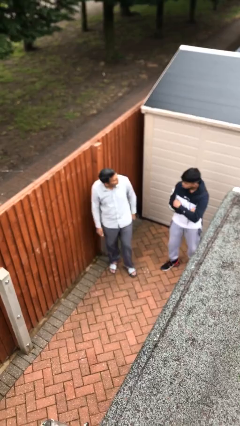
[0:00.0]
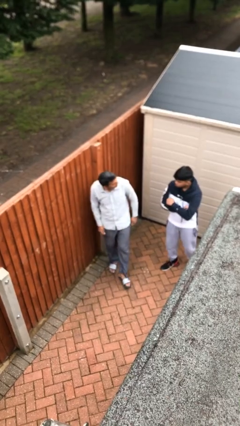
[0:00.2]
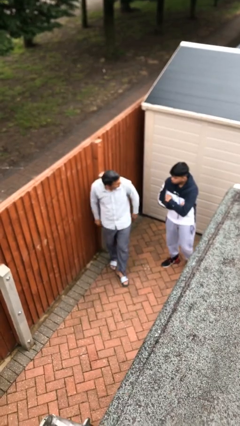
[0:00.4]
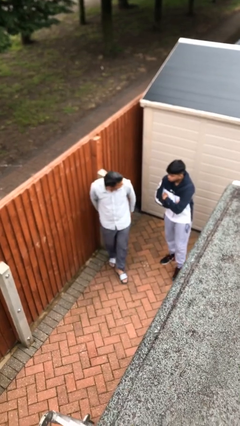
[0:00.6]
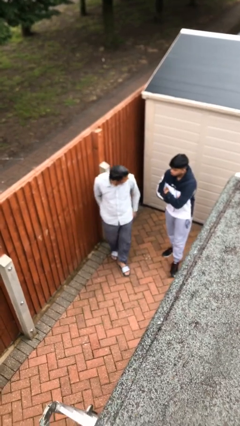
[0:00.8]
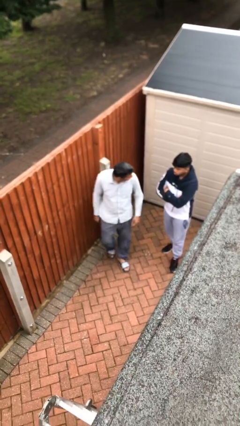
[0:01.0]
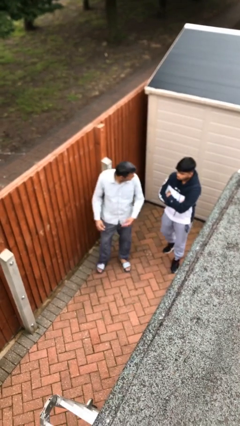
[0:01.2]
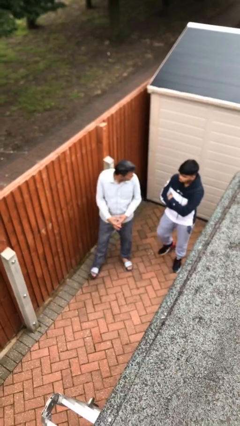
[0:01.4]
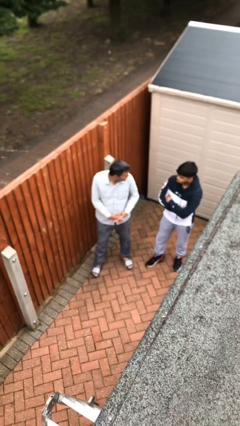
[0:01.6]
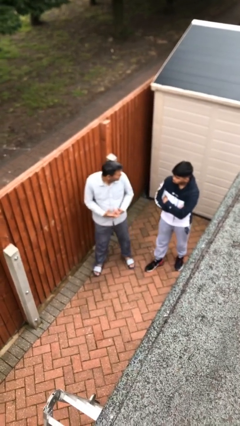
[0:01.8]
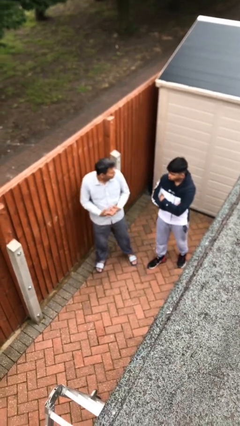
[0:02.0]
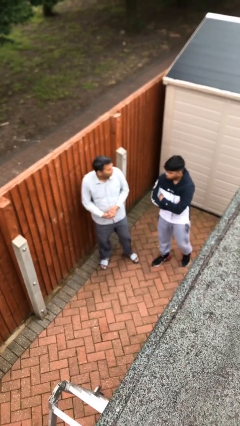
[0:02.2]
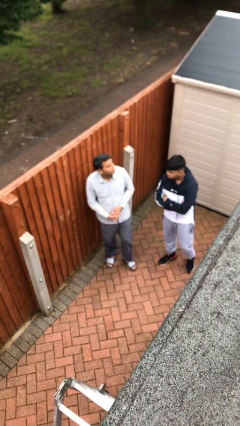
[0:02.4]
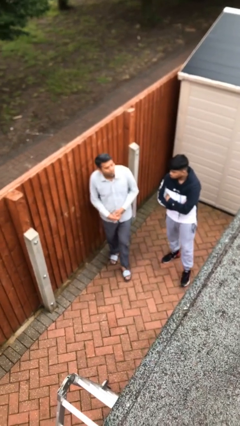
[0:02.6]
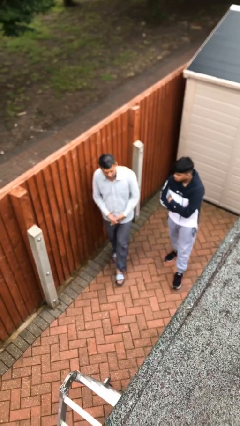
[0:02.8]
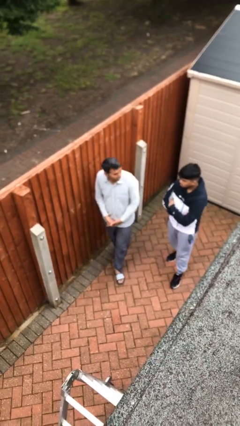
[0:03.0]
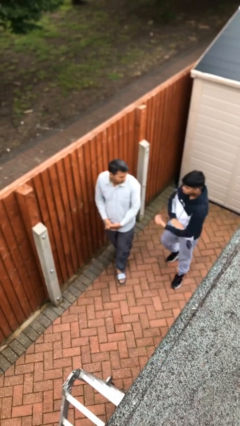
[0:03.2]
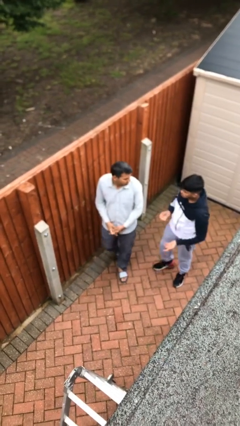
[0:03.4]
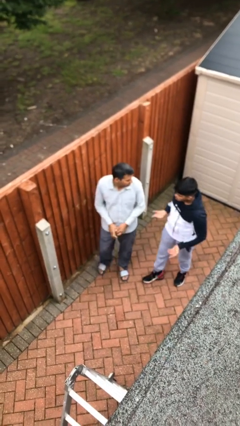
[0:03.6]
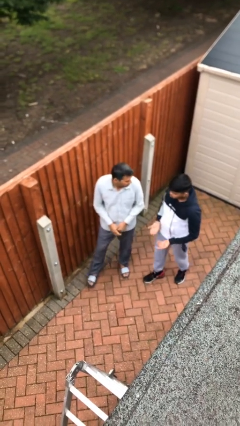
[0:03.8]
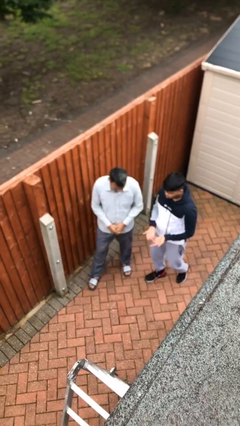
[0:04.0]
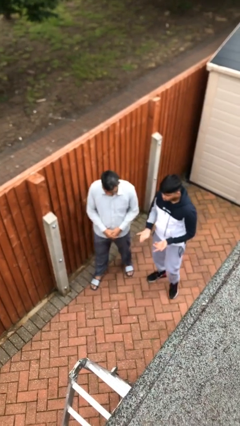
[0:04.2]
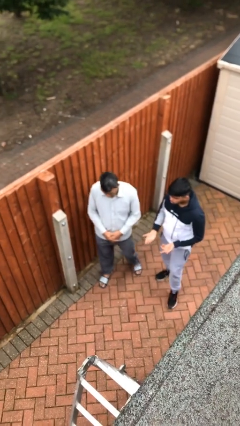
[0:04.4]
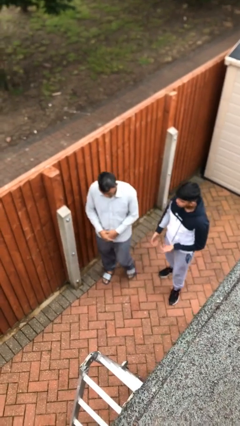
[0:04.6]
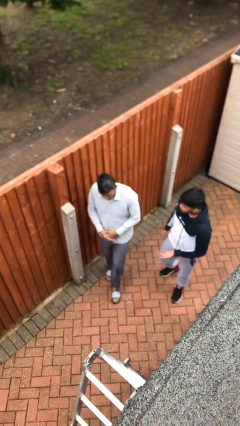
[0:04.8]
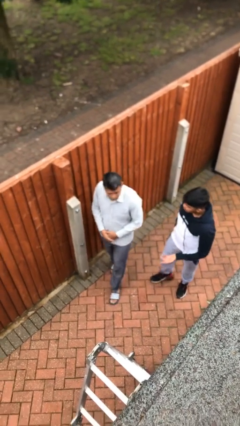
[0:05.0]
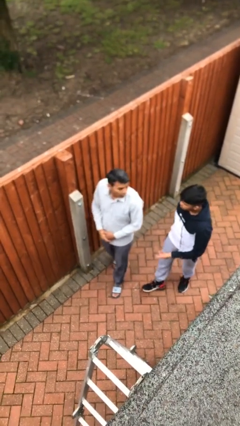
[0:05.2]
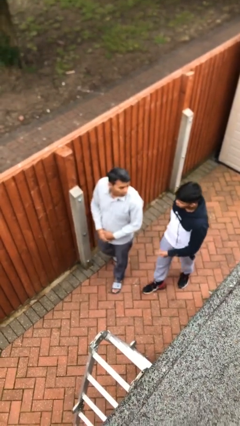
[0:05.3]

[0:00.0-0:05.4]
person talks to person

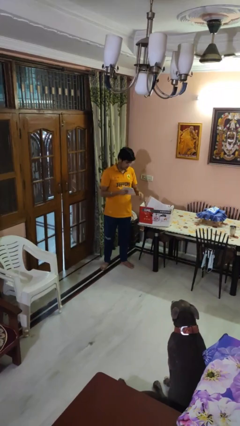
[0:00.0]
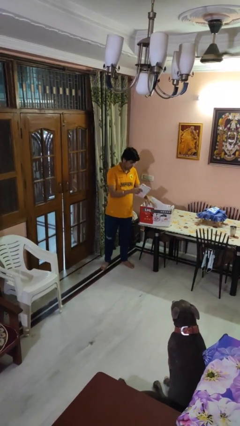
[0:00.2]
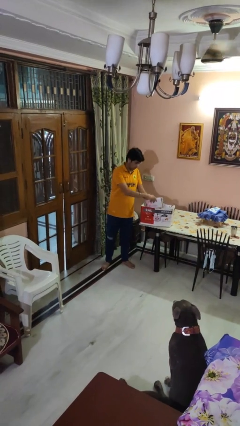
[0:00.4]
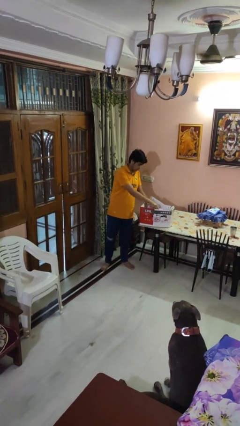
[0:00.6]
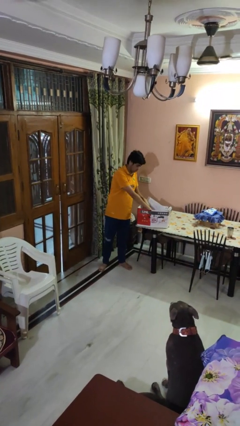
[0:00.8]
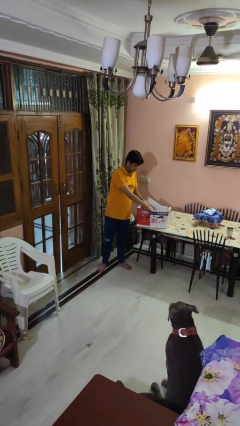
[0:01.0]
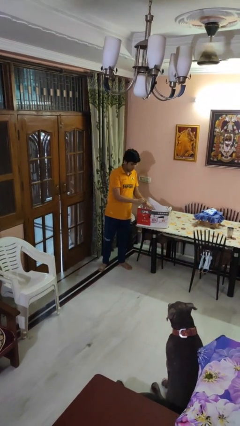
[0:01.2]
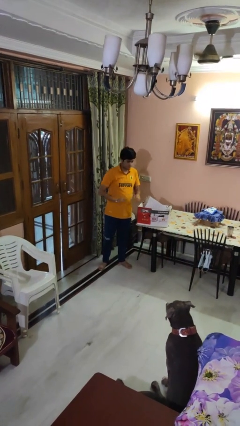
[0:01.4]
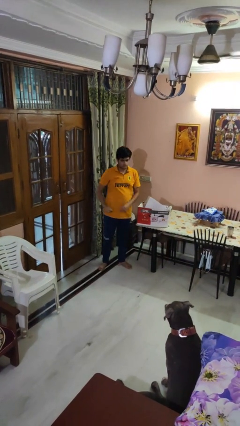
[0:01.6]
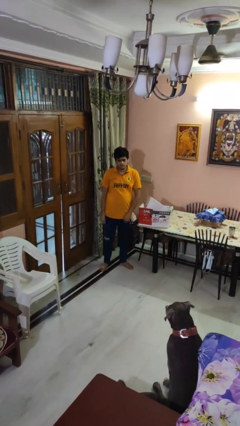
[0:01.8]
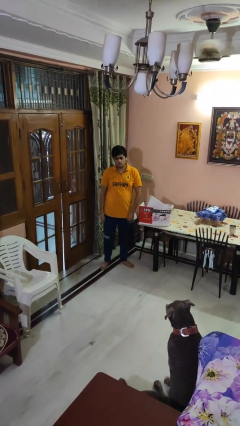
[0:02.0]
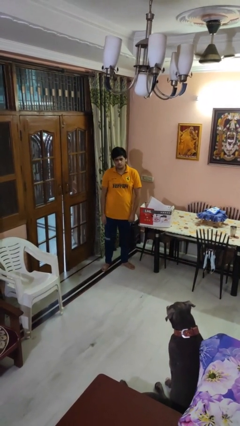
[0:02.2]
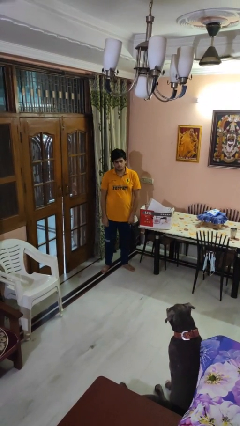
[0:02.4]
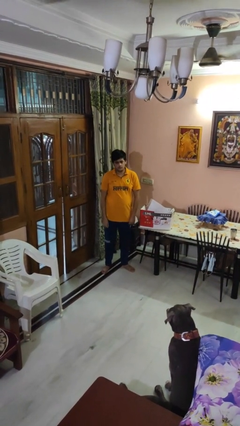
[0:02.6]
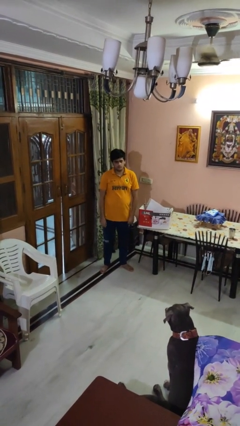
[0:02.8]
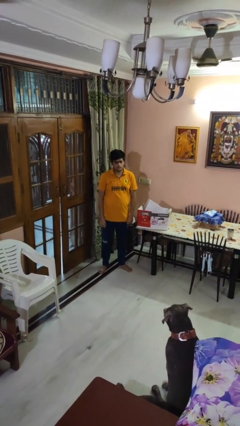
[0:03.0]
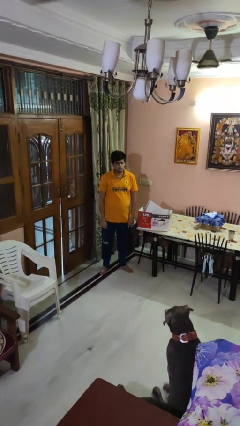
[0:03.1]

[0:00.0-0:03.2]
person puts object into box

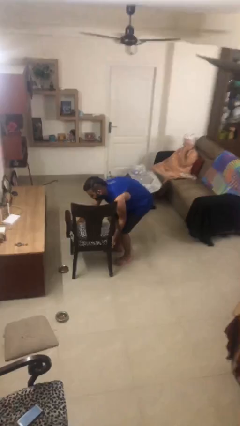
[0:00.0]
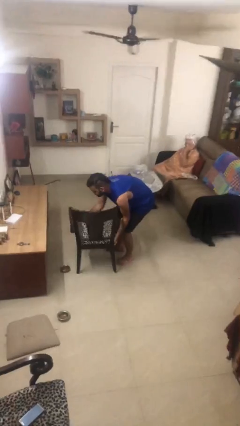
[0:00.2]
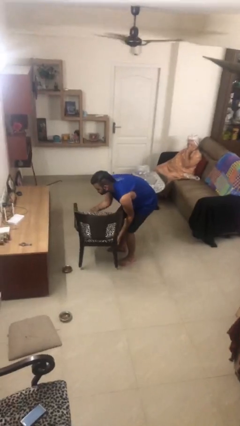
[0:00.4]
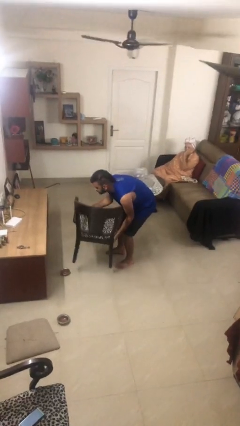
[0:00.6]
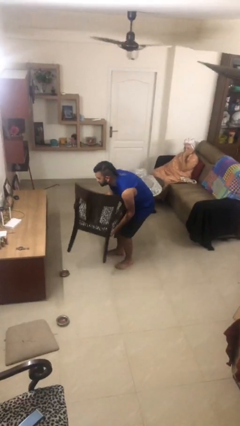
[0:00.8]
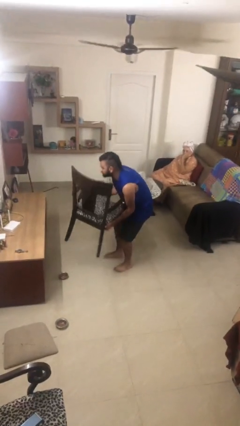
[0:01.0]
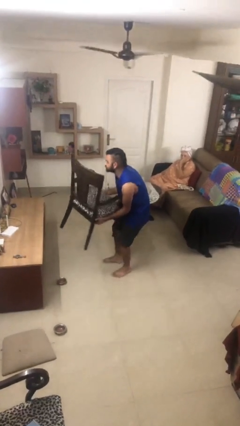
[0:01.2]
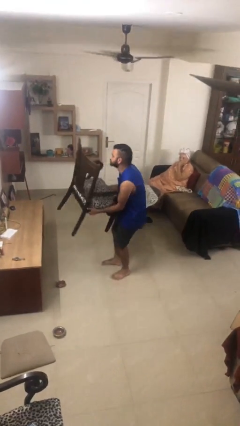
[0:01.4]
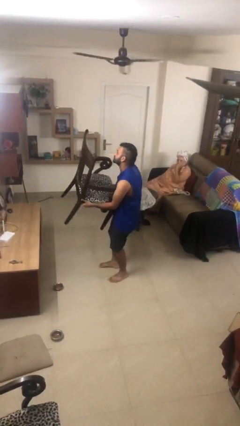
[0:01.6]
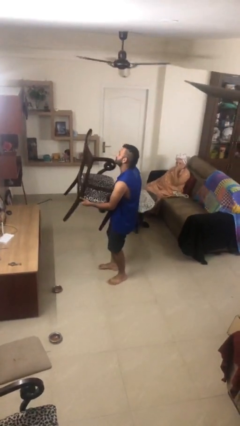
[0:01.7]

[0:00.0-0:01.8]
person picks up object from floor

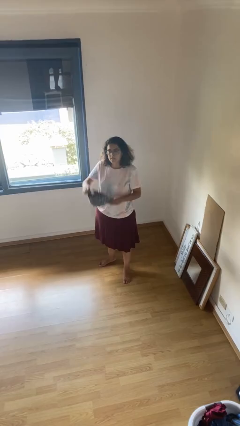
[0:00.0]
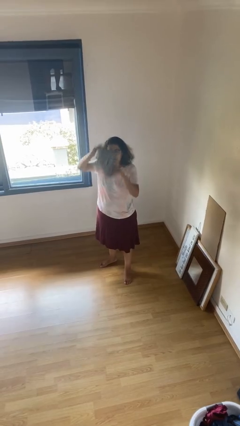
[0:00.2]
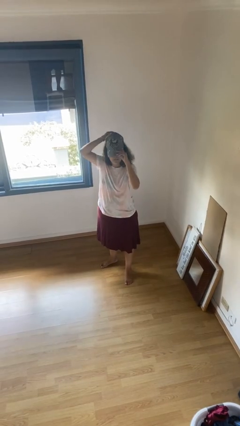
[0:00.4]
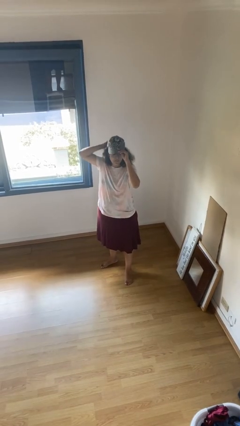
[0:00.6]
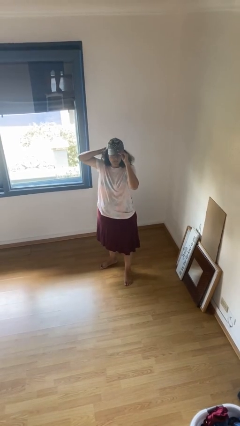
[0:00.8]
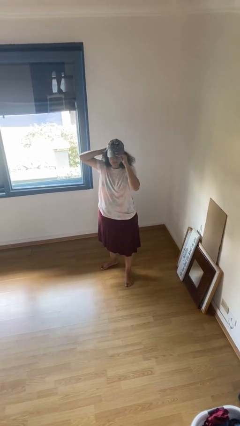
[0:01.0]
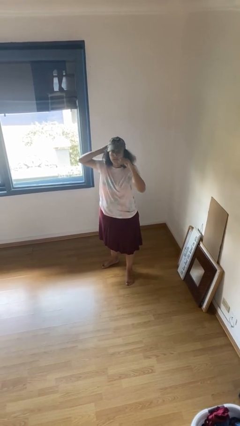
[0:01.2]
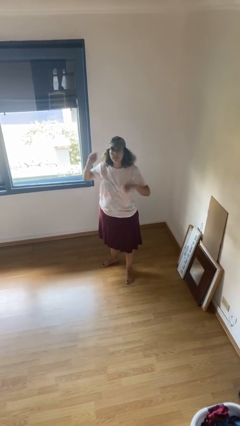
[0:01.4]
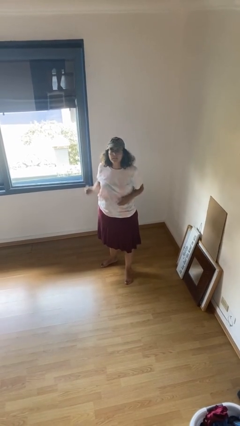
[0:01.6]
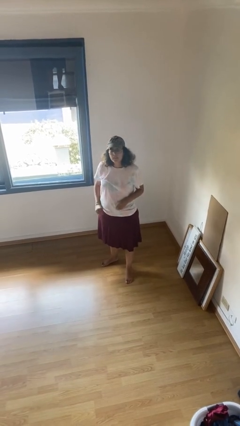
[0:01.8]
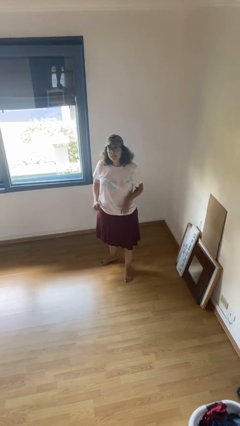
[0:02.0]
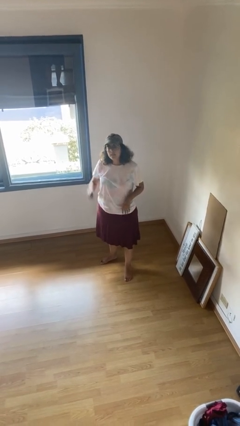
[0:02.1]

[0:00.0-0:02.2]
person puts on hat

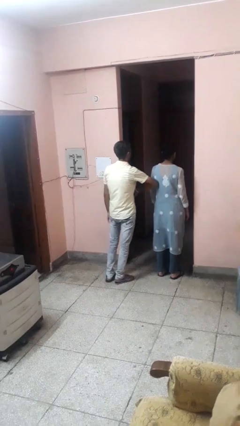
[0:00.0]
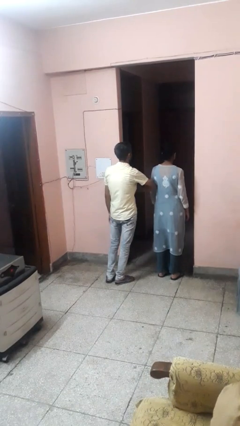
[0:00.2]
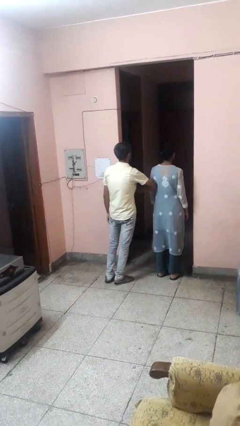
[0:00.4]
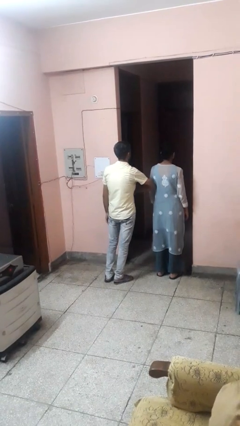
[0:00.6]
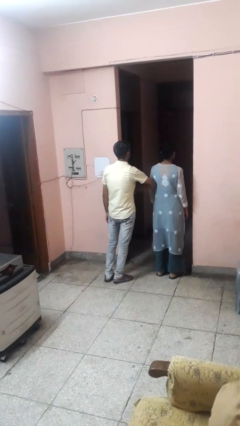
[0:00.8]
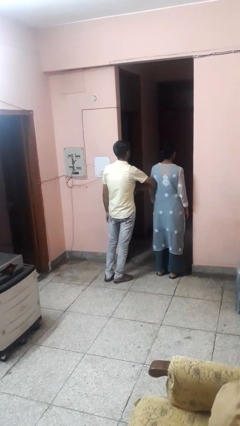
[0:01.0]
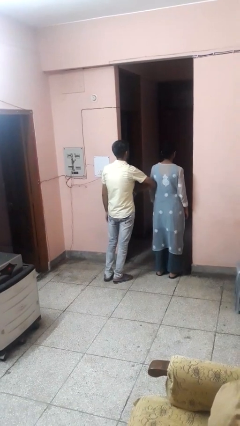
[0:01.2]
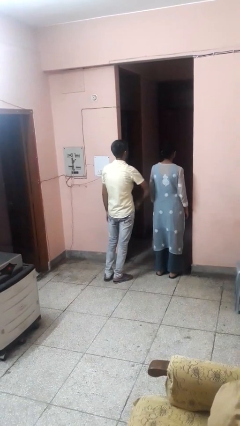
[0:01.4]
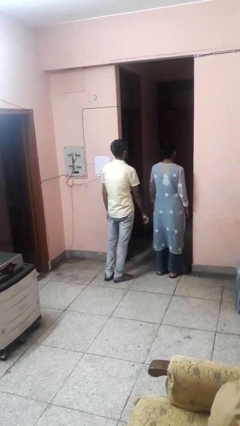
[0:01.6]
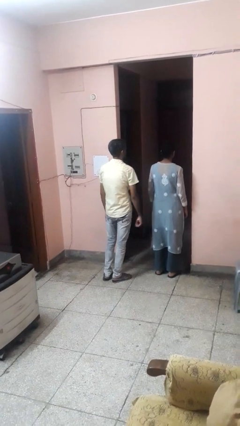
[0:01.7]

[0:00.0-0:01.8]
person nudges person with elbow

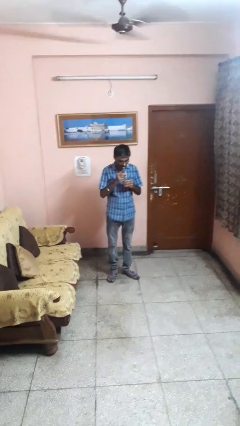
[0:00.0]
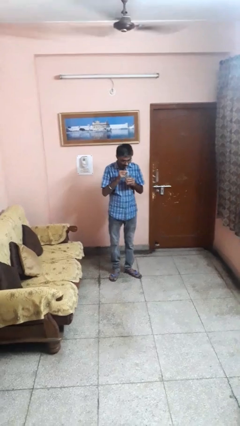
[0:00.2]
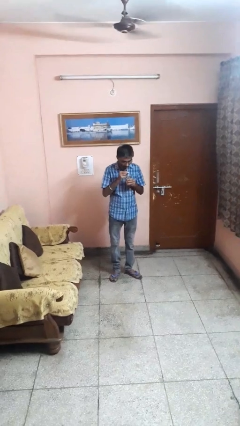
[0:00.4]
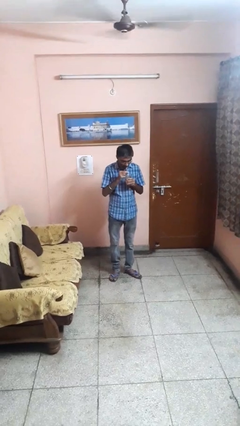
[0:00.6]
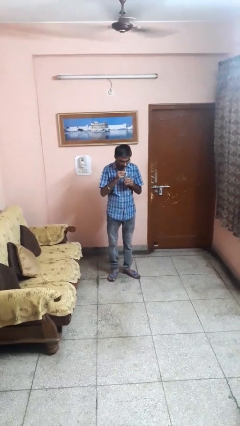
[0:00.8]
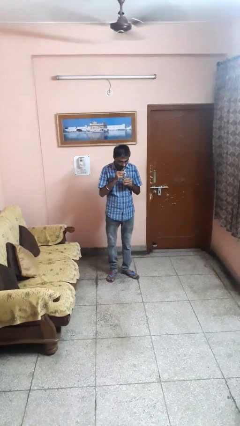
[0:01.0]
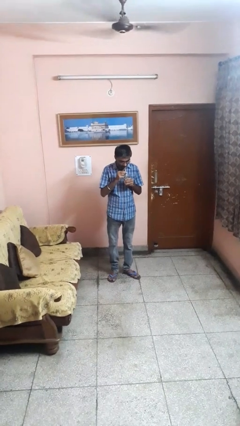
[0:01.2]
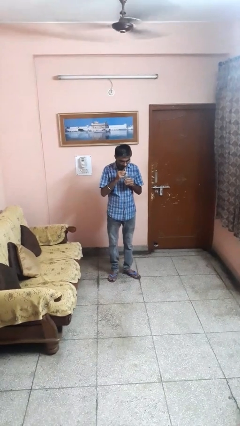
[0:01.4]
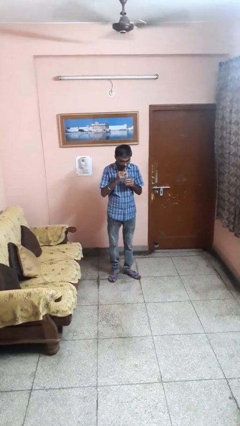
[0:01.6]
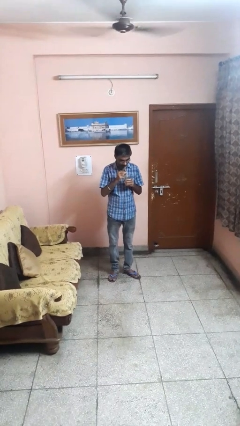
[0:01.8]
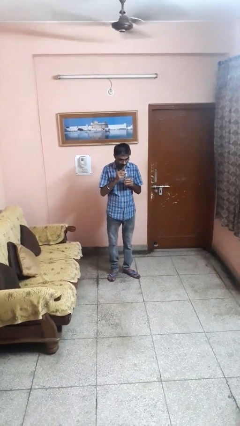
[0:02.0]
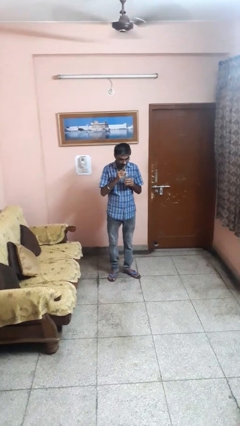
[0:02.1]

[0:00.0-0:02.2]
person drinks from straw

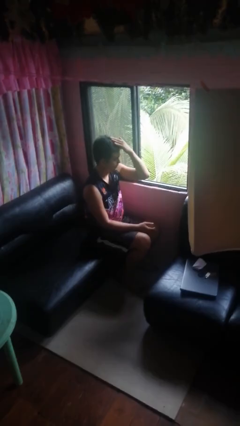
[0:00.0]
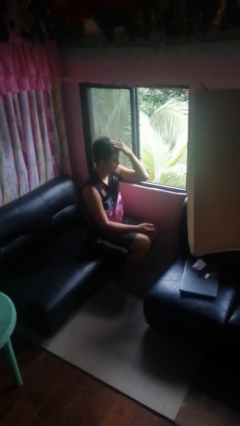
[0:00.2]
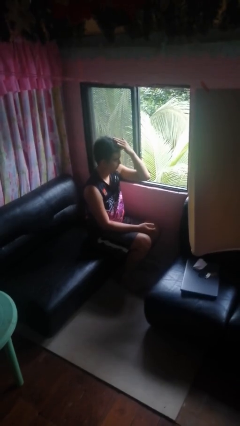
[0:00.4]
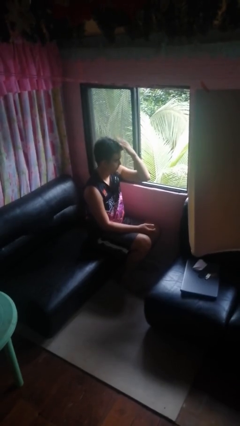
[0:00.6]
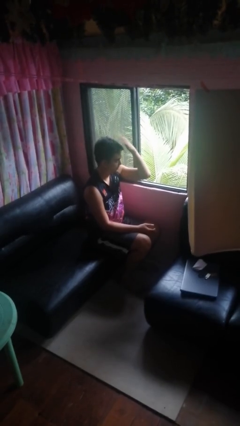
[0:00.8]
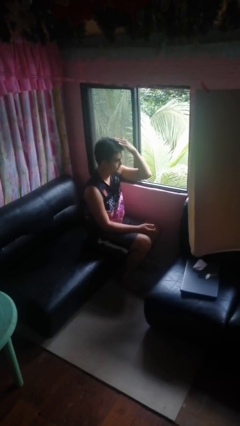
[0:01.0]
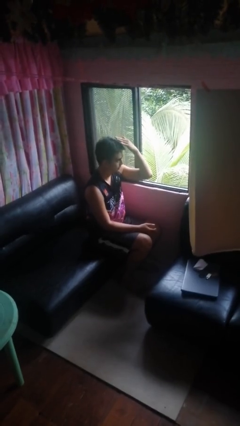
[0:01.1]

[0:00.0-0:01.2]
person pats head
